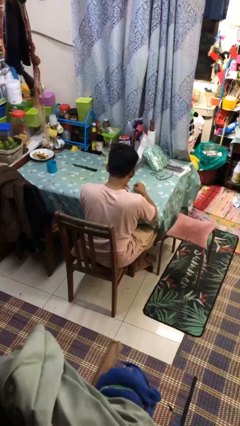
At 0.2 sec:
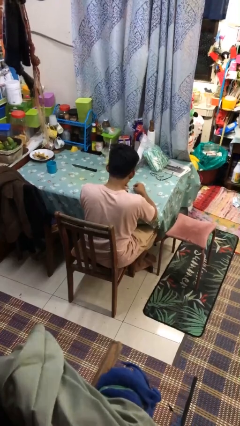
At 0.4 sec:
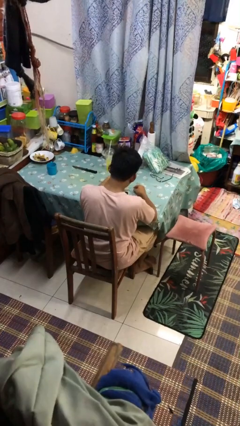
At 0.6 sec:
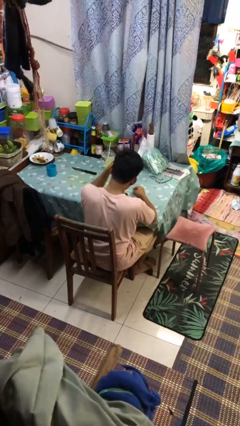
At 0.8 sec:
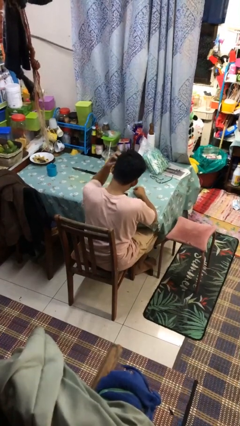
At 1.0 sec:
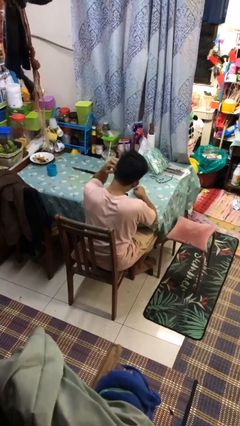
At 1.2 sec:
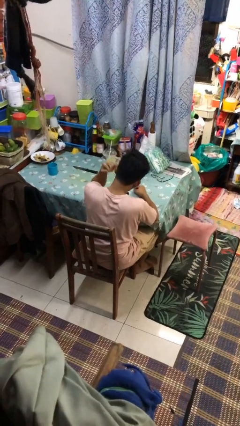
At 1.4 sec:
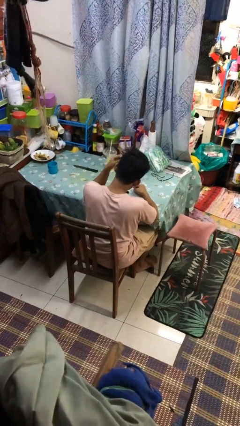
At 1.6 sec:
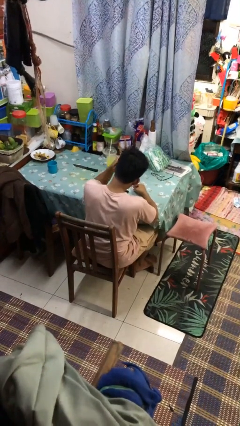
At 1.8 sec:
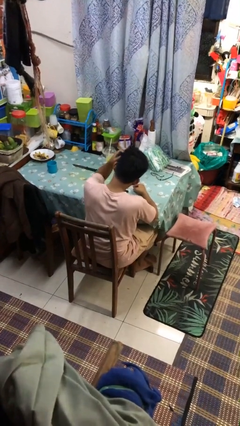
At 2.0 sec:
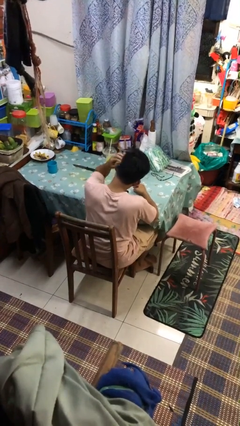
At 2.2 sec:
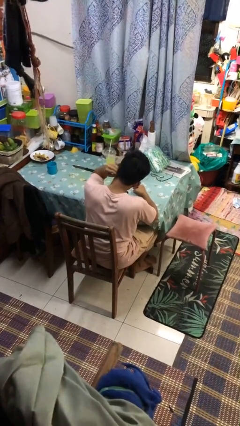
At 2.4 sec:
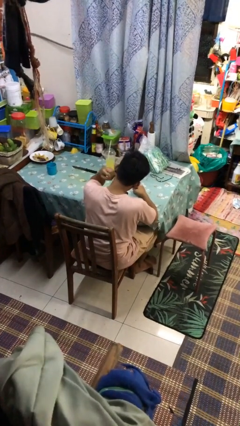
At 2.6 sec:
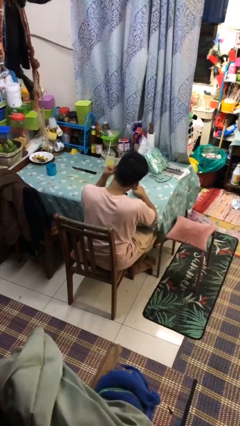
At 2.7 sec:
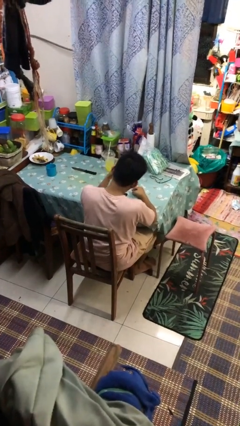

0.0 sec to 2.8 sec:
person strokes hair

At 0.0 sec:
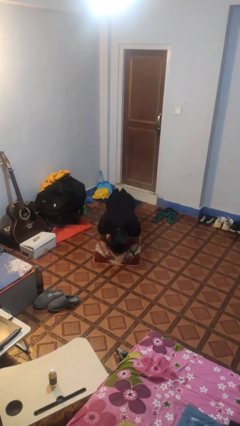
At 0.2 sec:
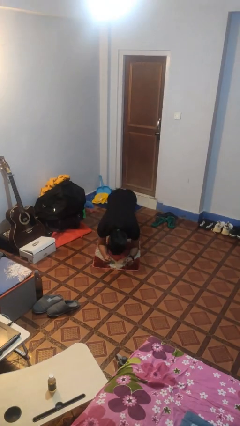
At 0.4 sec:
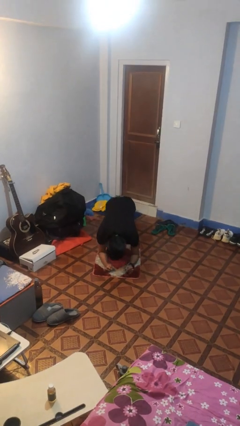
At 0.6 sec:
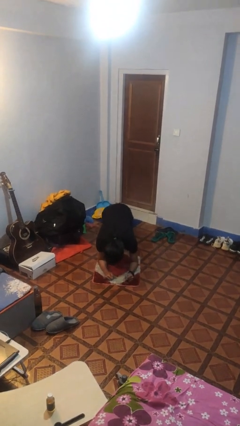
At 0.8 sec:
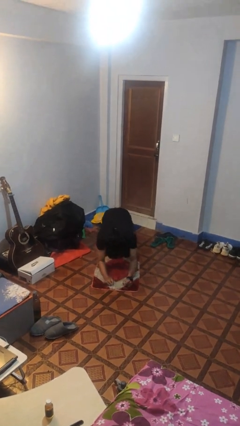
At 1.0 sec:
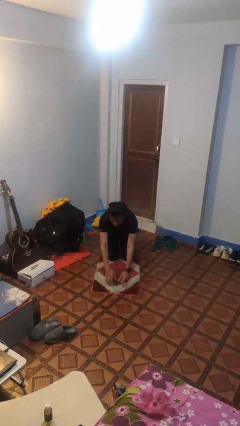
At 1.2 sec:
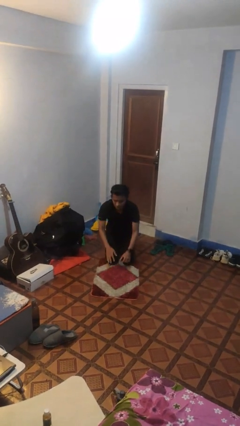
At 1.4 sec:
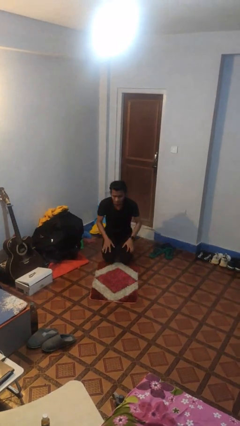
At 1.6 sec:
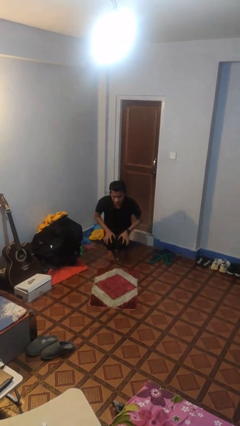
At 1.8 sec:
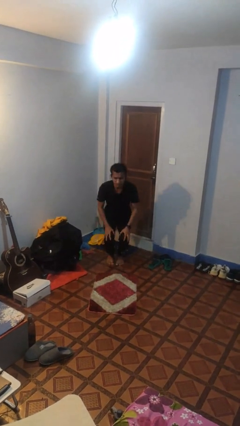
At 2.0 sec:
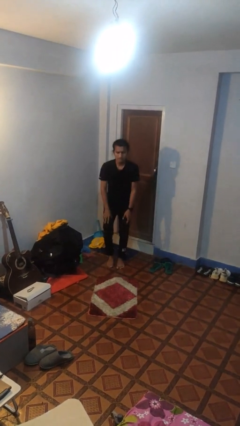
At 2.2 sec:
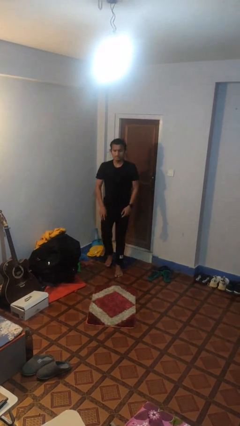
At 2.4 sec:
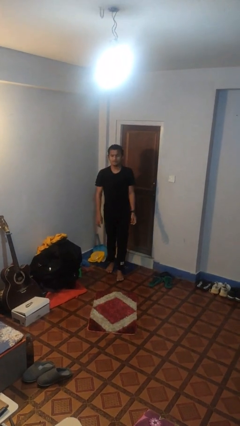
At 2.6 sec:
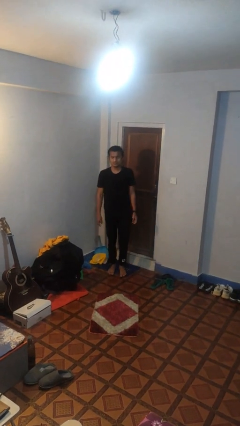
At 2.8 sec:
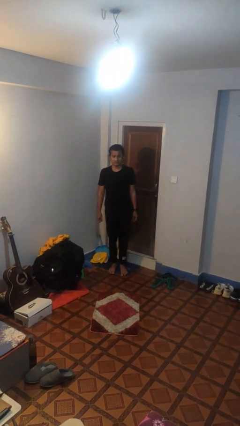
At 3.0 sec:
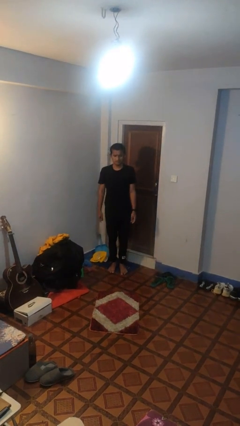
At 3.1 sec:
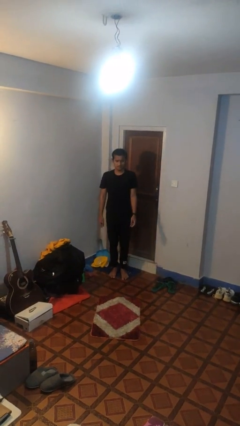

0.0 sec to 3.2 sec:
person stands up from floor

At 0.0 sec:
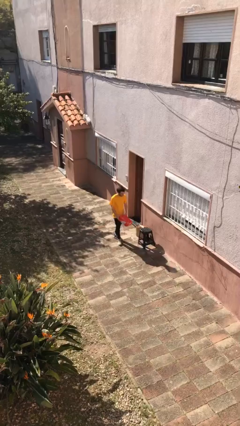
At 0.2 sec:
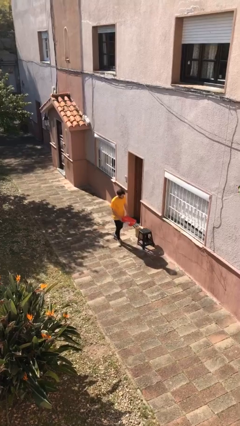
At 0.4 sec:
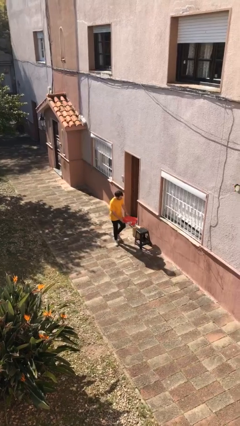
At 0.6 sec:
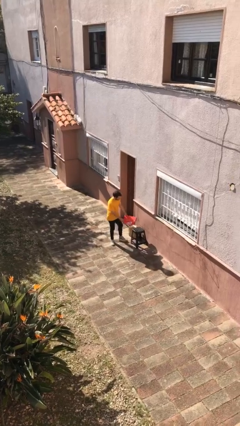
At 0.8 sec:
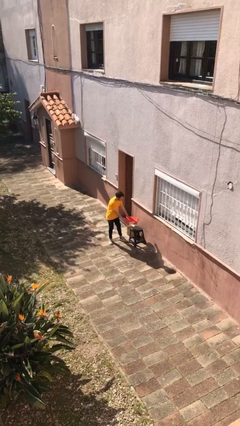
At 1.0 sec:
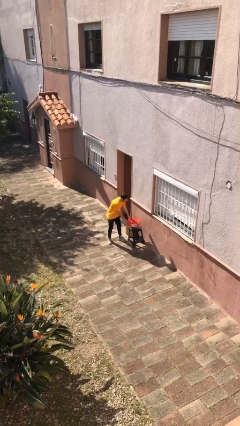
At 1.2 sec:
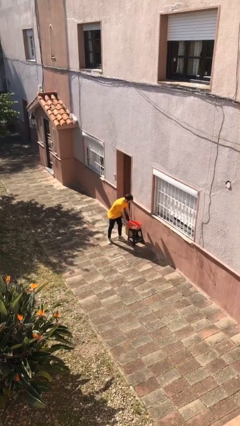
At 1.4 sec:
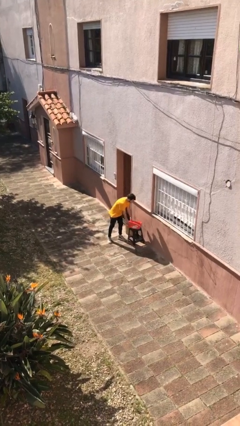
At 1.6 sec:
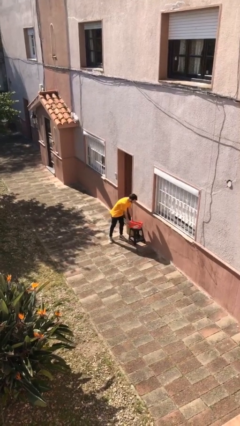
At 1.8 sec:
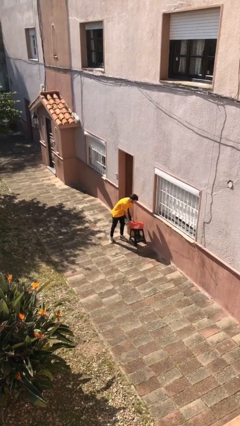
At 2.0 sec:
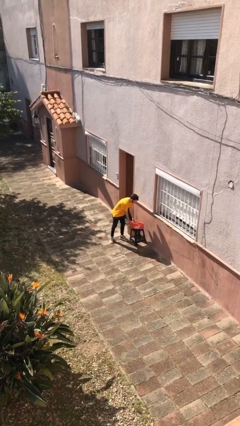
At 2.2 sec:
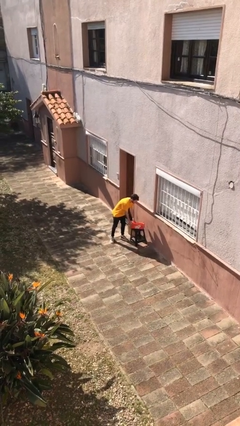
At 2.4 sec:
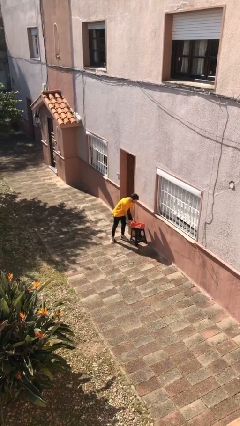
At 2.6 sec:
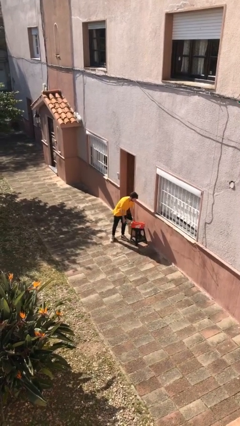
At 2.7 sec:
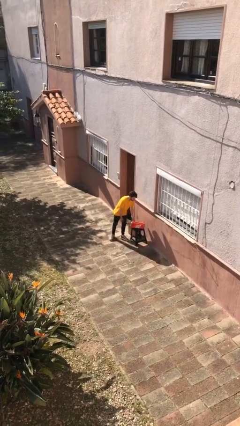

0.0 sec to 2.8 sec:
person puts down object on table

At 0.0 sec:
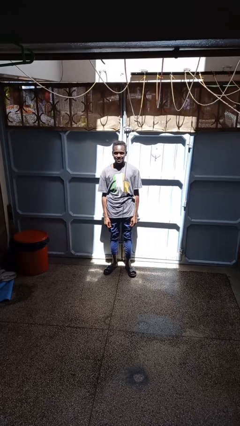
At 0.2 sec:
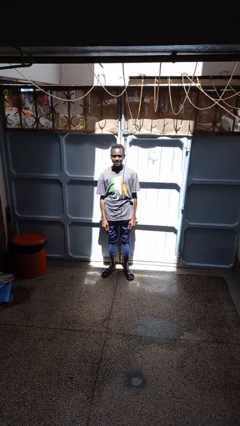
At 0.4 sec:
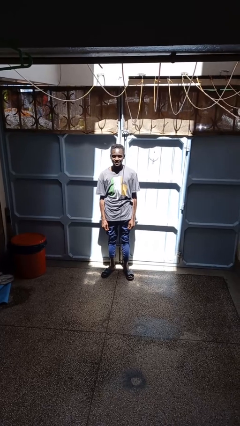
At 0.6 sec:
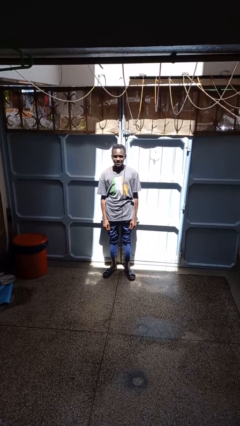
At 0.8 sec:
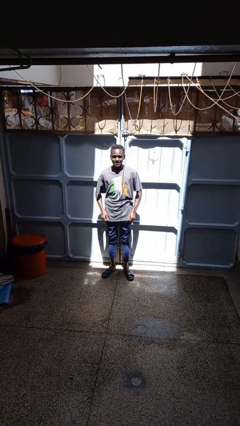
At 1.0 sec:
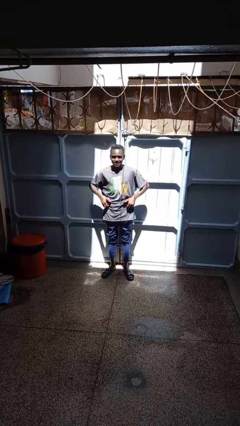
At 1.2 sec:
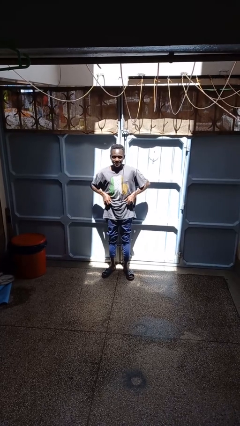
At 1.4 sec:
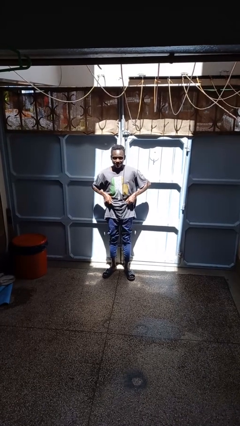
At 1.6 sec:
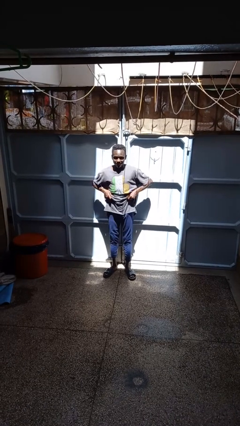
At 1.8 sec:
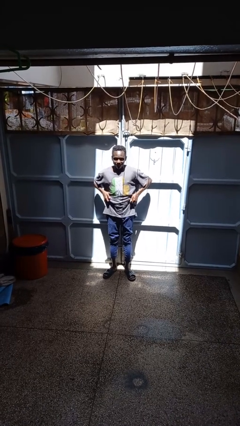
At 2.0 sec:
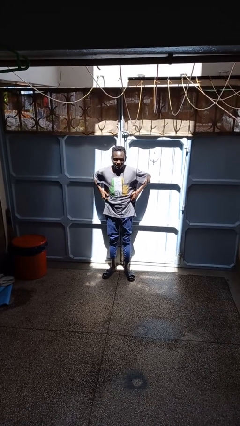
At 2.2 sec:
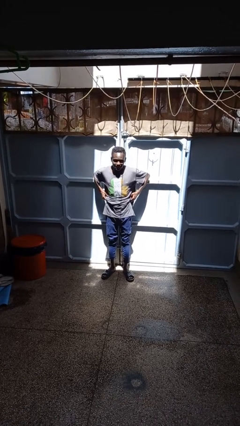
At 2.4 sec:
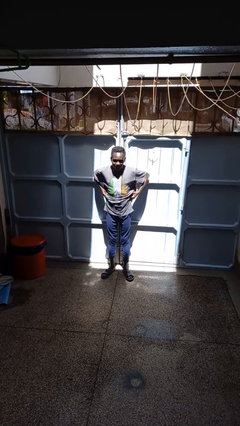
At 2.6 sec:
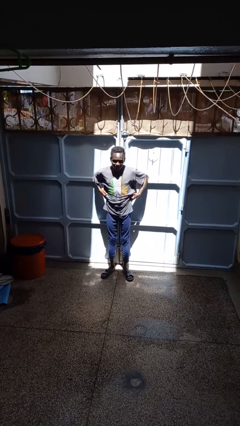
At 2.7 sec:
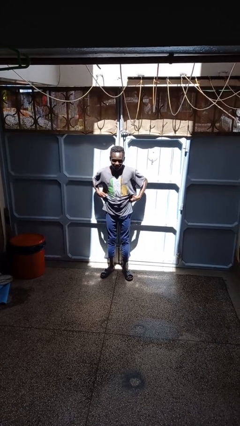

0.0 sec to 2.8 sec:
person hikes up pants

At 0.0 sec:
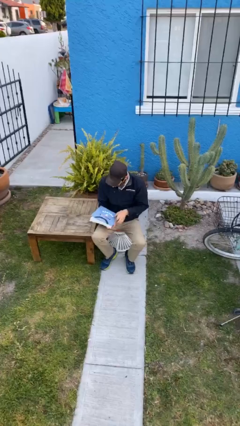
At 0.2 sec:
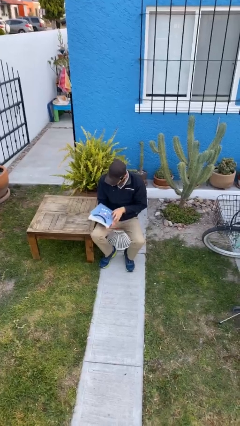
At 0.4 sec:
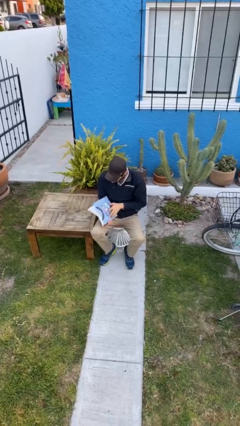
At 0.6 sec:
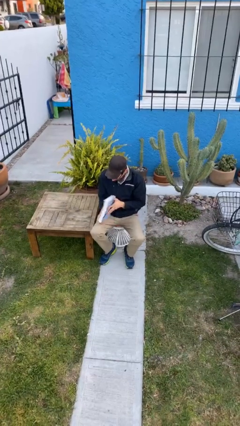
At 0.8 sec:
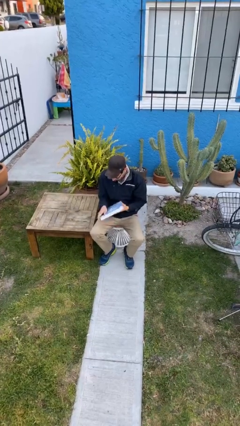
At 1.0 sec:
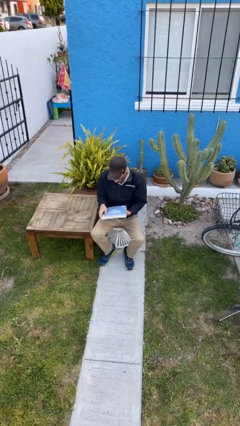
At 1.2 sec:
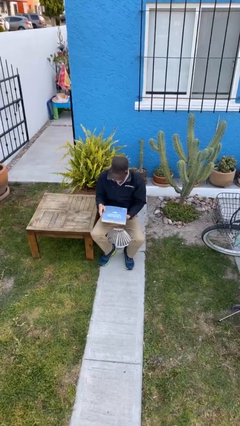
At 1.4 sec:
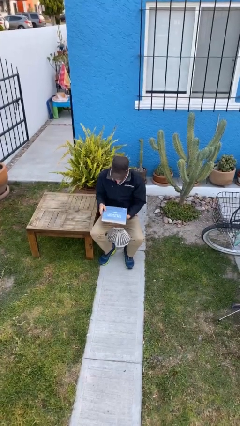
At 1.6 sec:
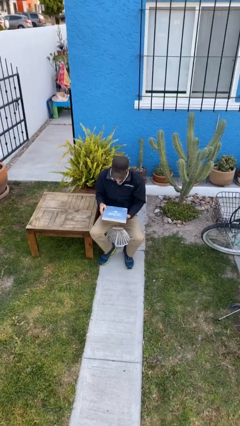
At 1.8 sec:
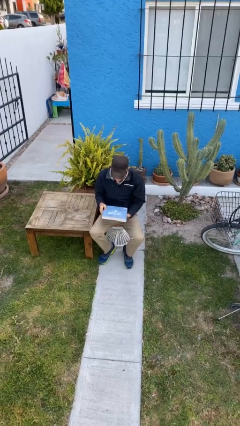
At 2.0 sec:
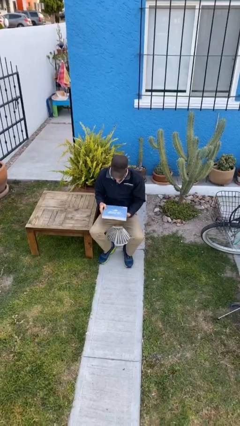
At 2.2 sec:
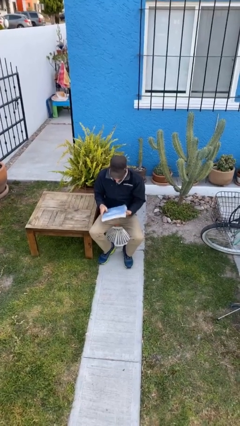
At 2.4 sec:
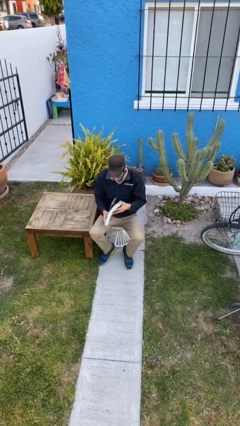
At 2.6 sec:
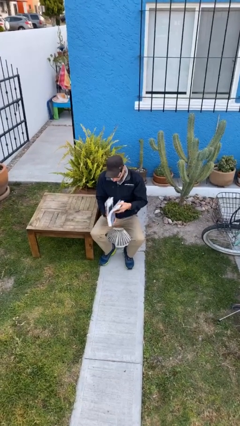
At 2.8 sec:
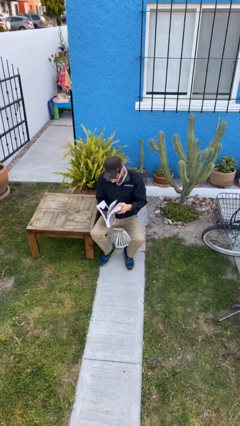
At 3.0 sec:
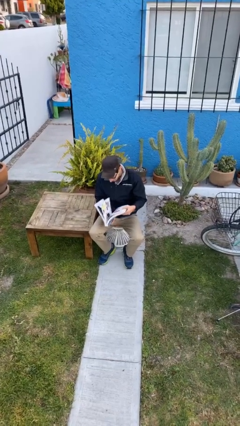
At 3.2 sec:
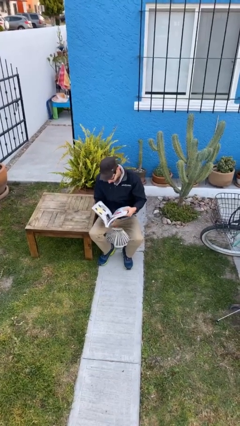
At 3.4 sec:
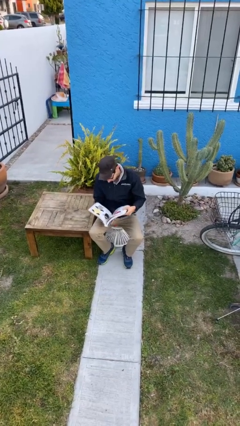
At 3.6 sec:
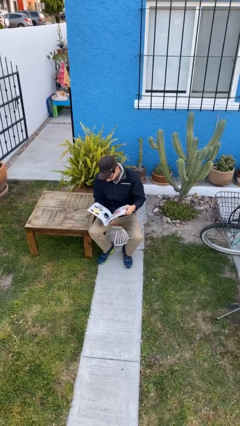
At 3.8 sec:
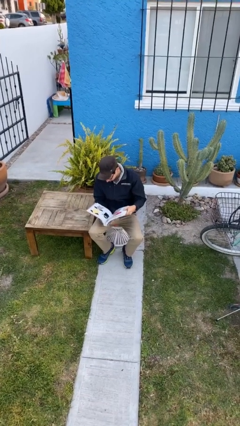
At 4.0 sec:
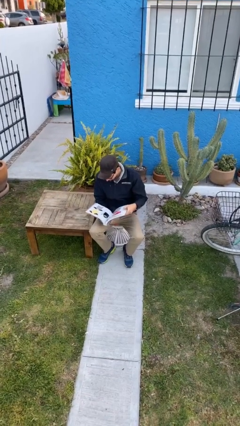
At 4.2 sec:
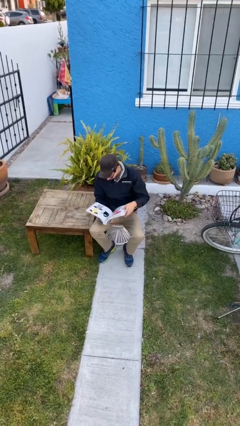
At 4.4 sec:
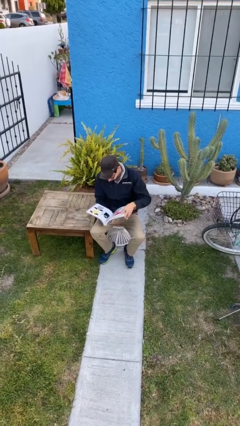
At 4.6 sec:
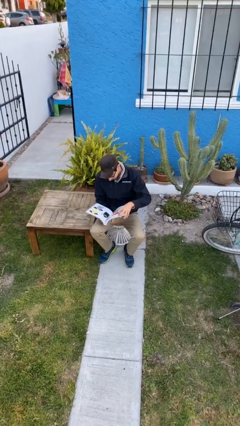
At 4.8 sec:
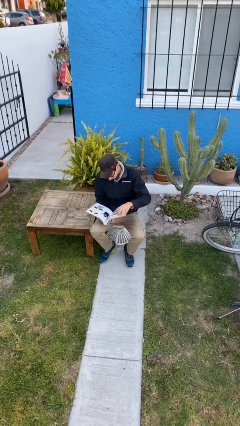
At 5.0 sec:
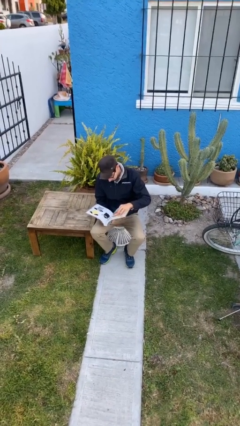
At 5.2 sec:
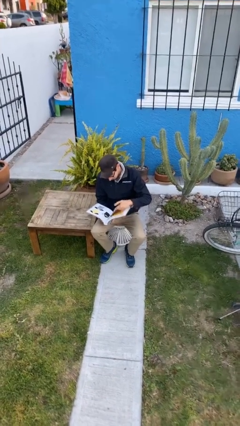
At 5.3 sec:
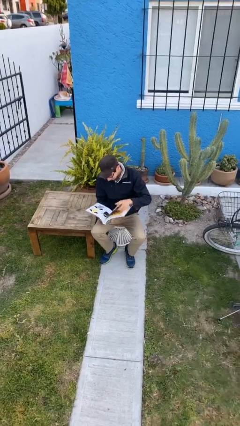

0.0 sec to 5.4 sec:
person reads document
